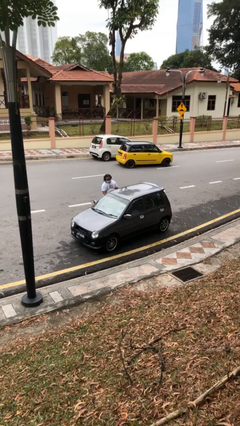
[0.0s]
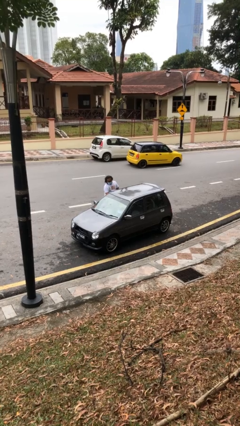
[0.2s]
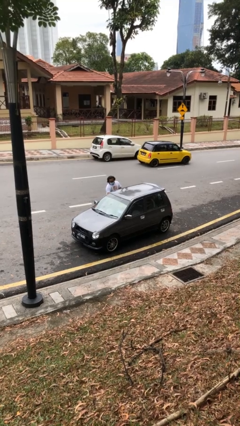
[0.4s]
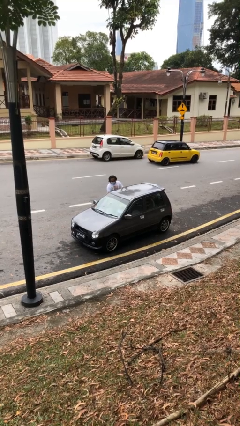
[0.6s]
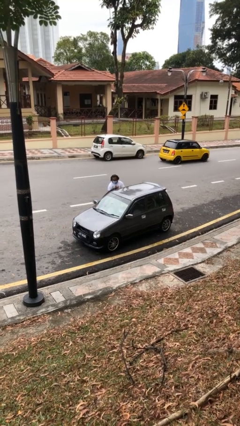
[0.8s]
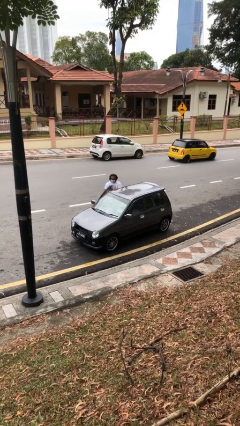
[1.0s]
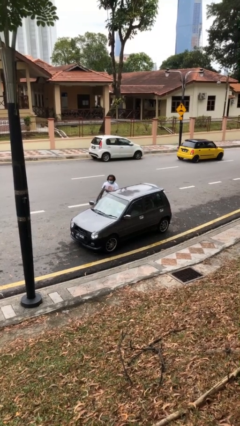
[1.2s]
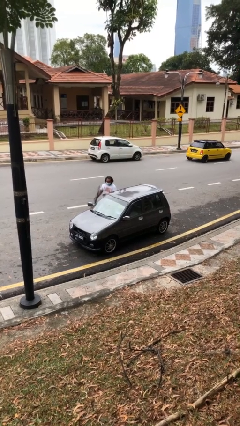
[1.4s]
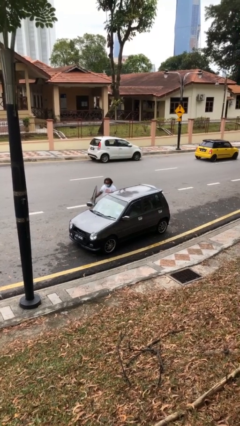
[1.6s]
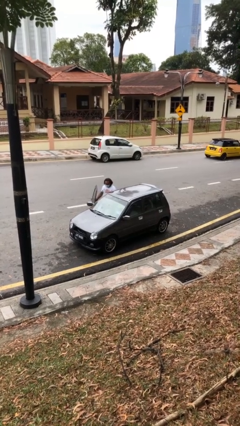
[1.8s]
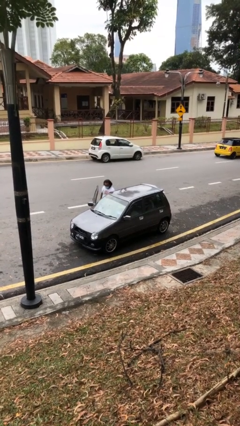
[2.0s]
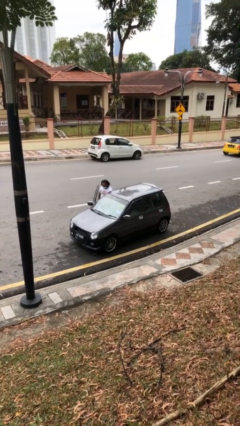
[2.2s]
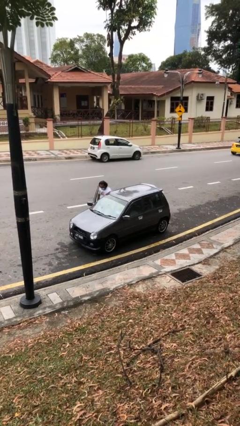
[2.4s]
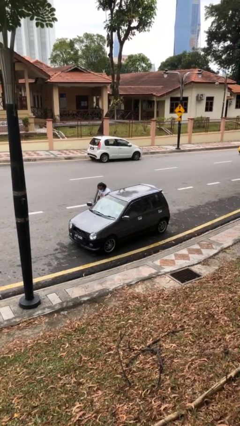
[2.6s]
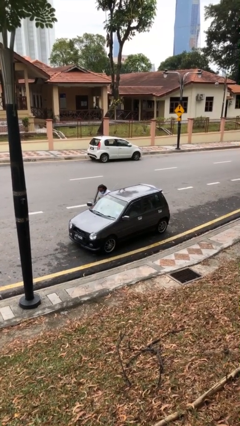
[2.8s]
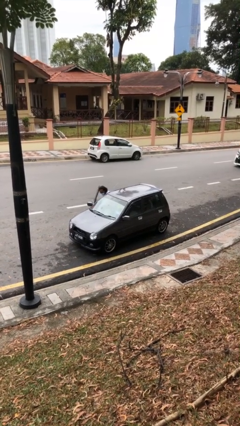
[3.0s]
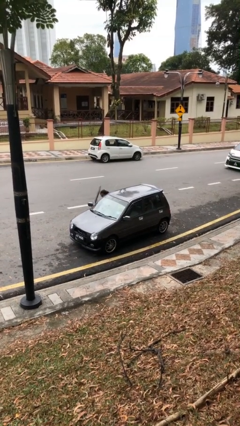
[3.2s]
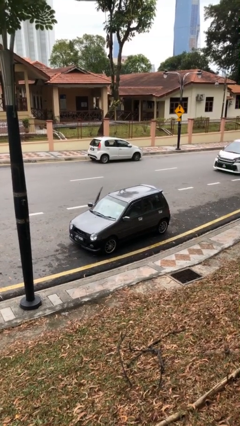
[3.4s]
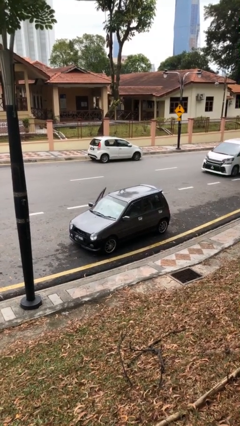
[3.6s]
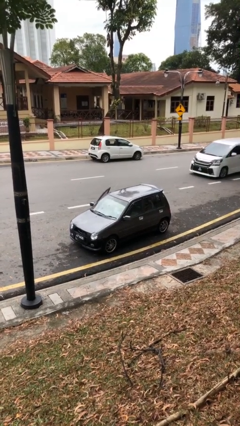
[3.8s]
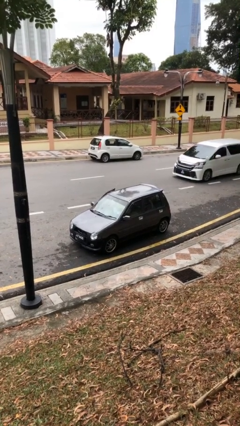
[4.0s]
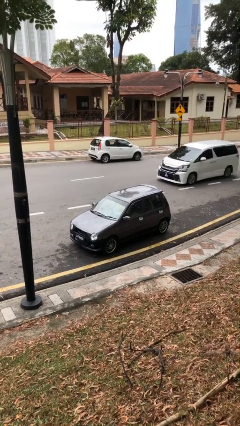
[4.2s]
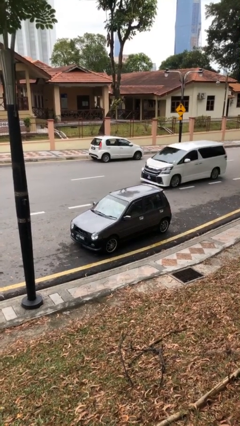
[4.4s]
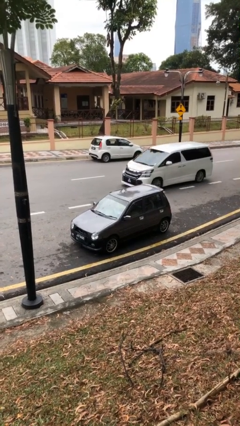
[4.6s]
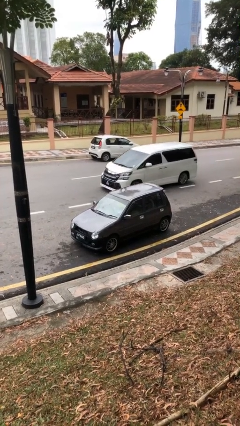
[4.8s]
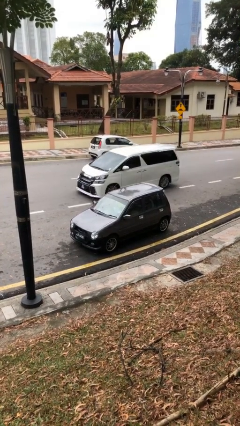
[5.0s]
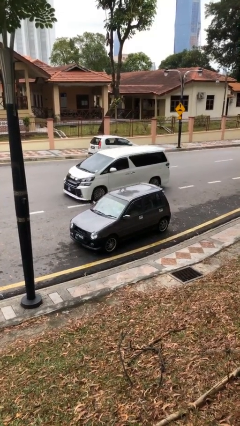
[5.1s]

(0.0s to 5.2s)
car picks up person

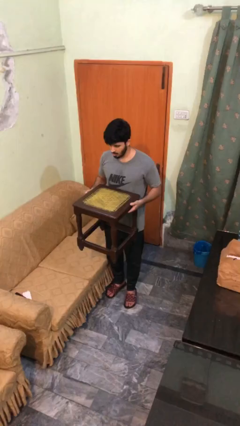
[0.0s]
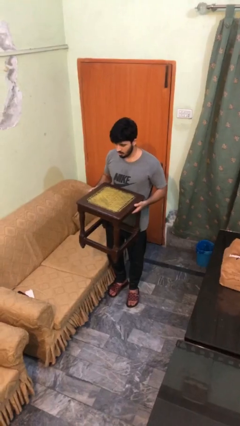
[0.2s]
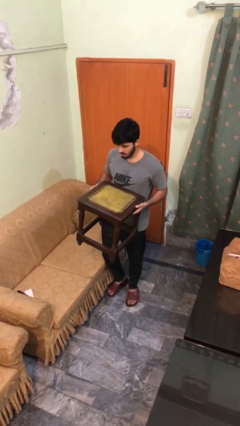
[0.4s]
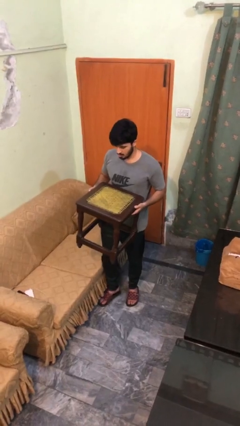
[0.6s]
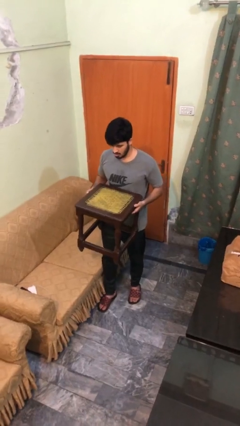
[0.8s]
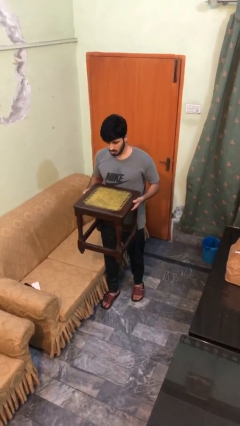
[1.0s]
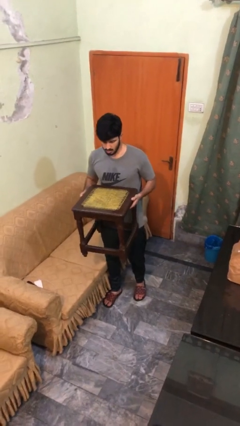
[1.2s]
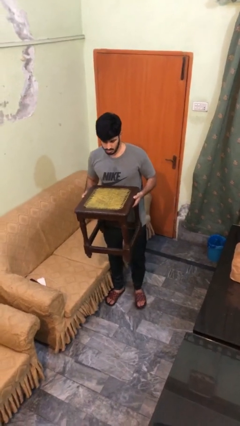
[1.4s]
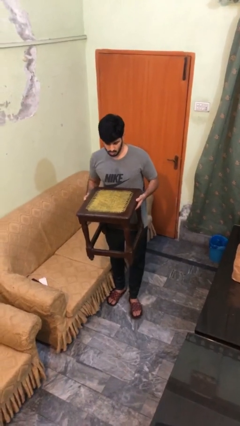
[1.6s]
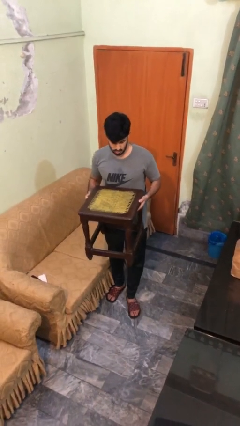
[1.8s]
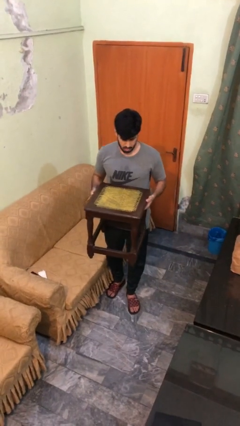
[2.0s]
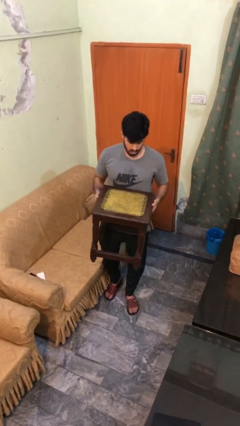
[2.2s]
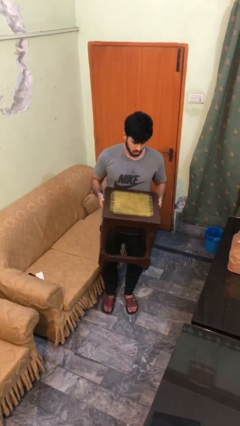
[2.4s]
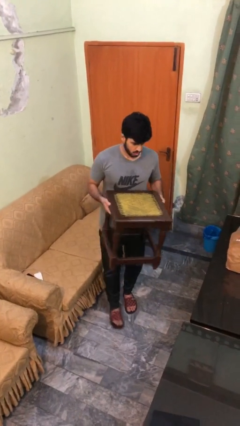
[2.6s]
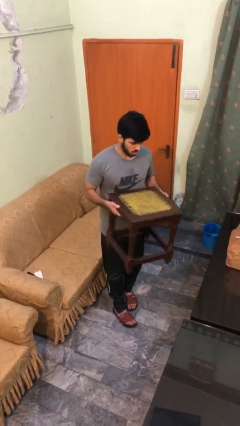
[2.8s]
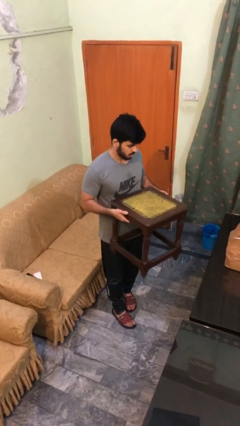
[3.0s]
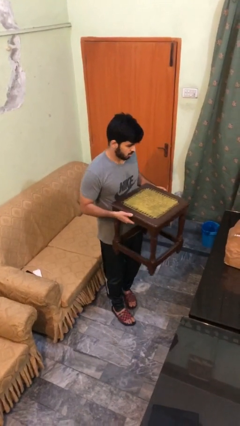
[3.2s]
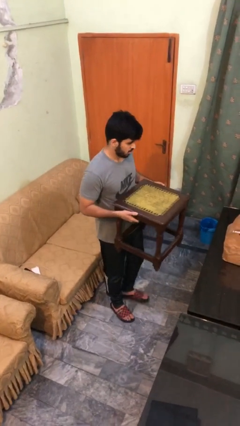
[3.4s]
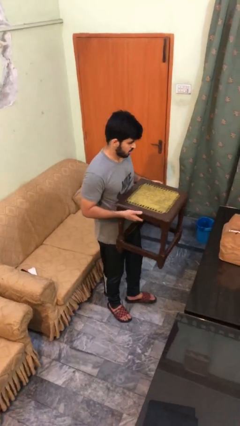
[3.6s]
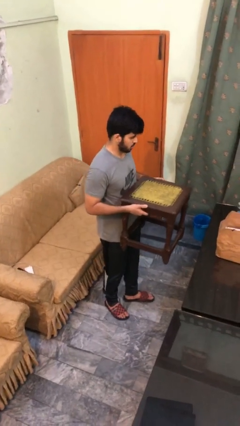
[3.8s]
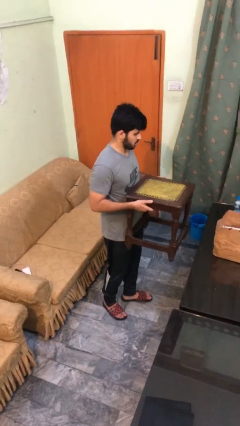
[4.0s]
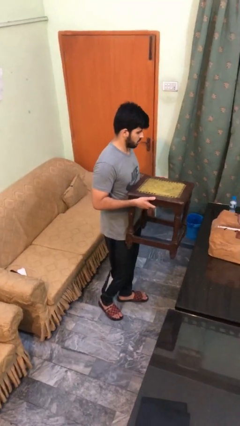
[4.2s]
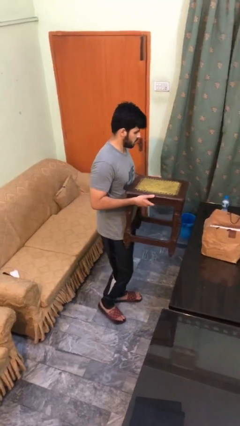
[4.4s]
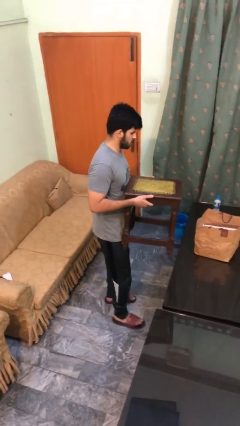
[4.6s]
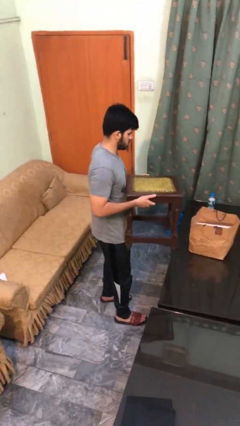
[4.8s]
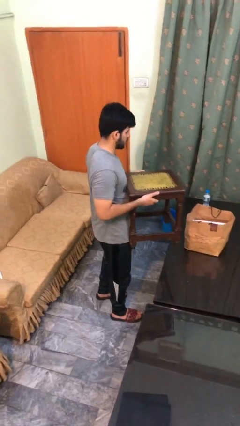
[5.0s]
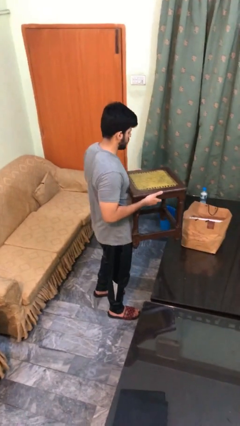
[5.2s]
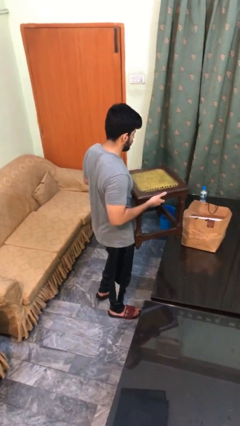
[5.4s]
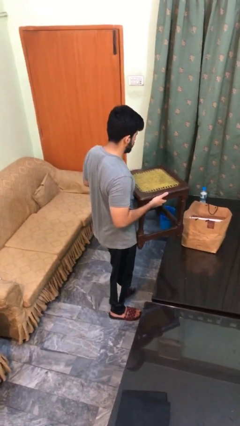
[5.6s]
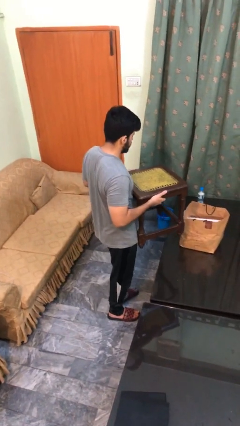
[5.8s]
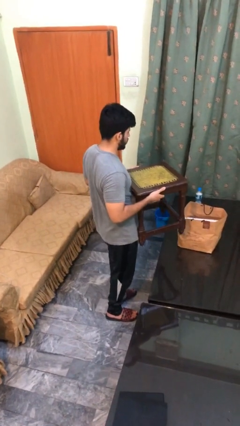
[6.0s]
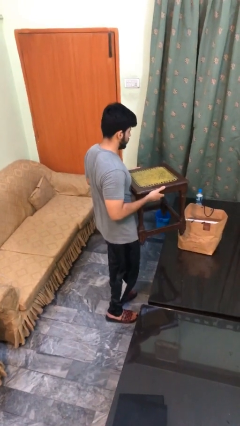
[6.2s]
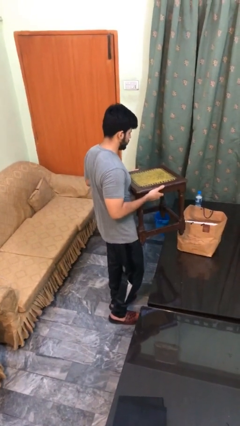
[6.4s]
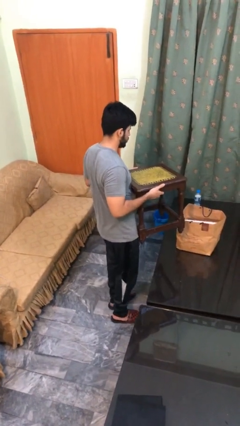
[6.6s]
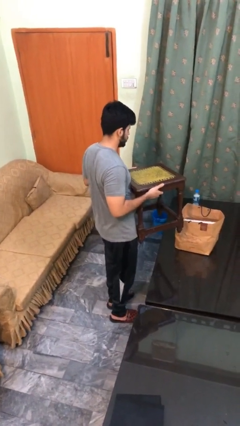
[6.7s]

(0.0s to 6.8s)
person carries furniture

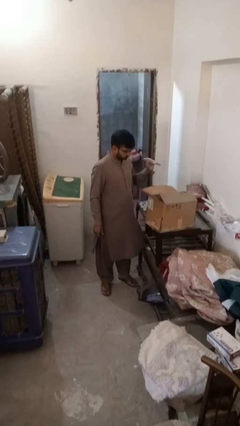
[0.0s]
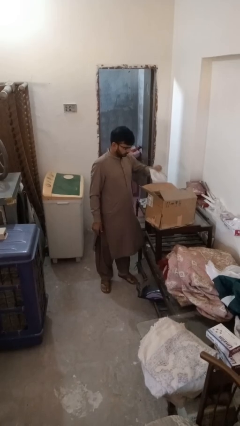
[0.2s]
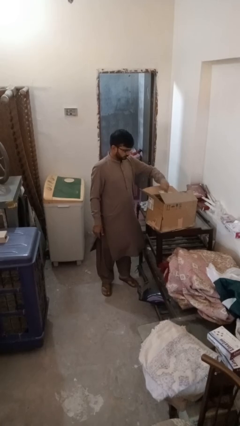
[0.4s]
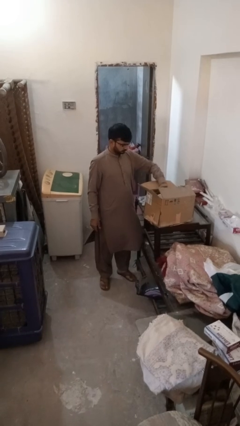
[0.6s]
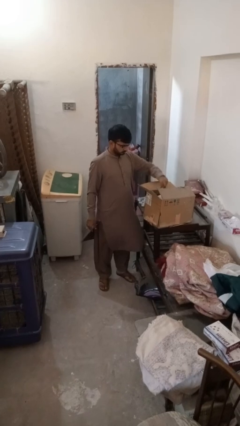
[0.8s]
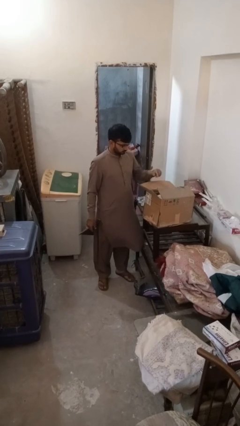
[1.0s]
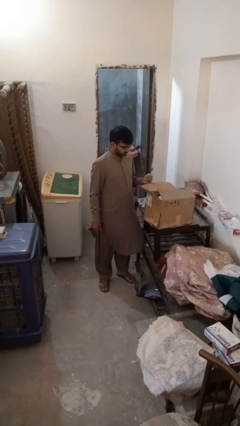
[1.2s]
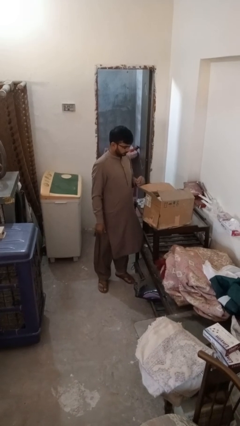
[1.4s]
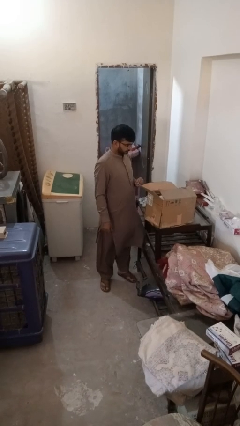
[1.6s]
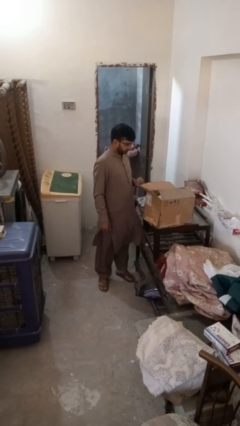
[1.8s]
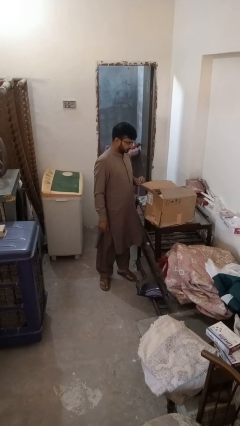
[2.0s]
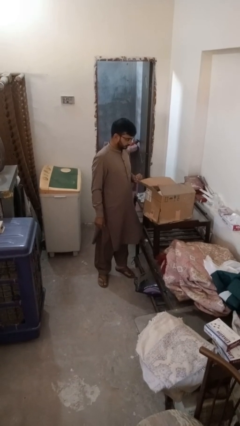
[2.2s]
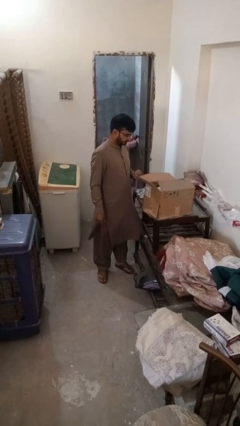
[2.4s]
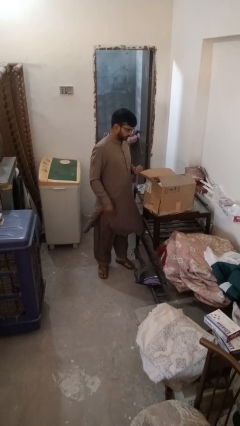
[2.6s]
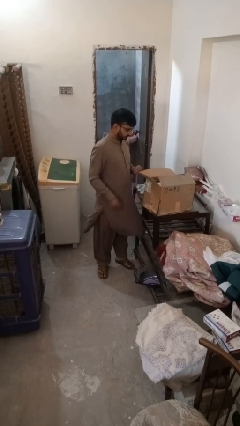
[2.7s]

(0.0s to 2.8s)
person puts object into box

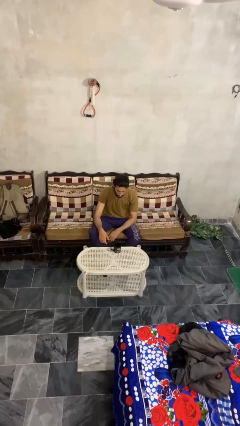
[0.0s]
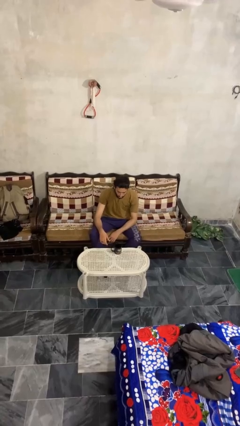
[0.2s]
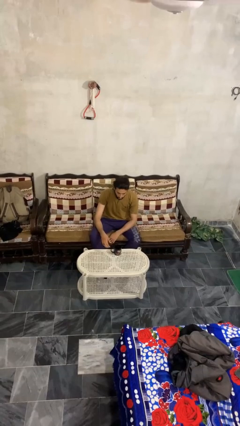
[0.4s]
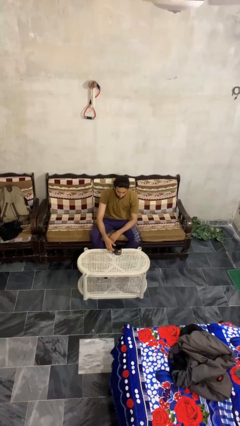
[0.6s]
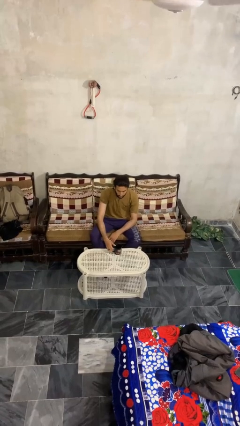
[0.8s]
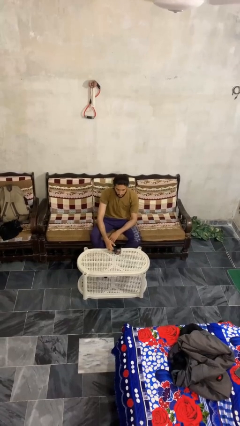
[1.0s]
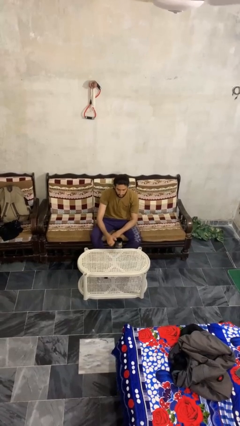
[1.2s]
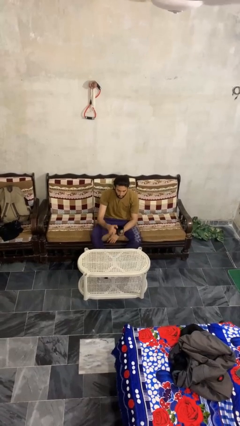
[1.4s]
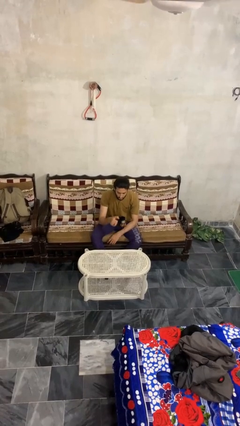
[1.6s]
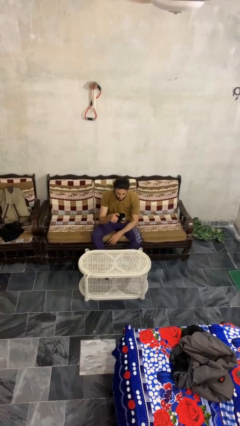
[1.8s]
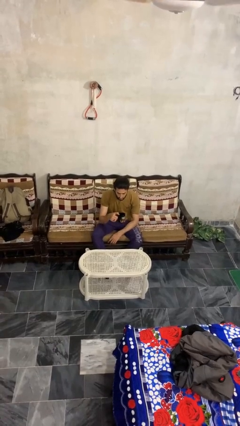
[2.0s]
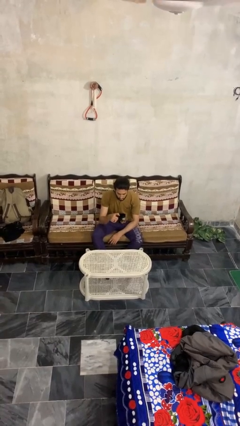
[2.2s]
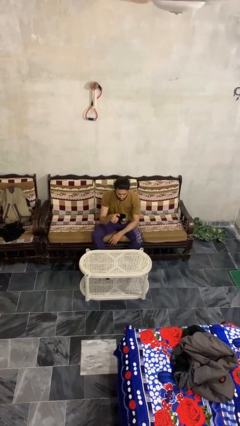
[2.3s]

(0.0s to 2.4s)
person picks up object from table

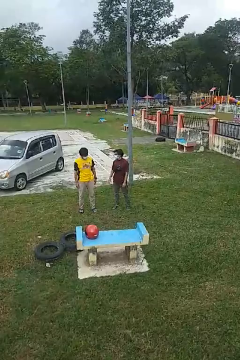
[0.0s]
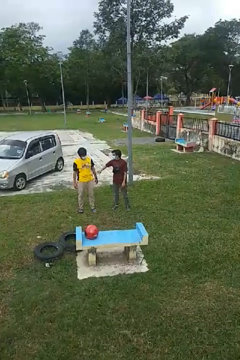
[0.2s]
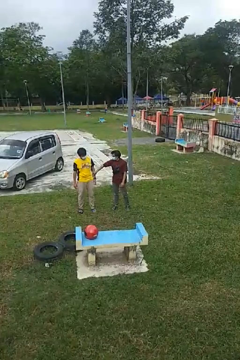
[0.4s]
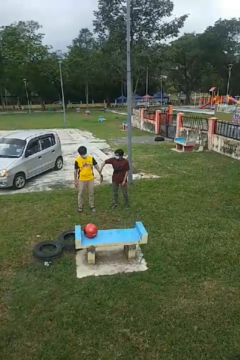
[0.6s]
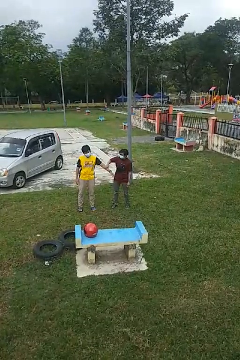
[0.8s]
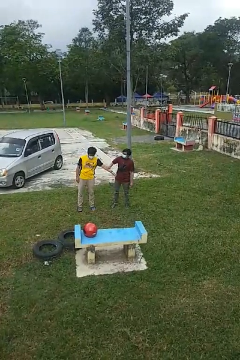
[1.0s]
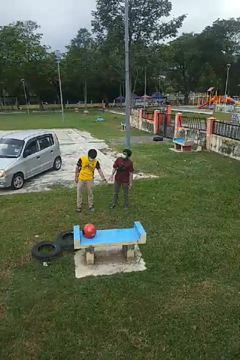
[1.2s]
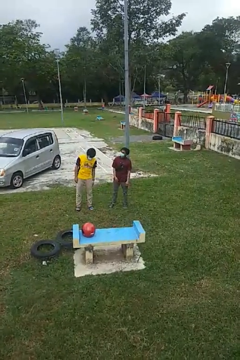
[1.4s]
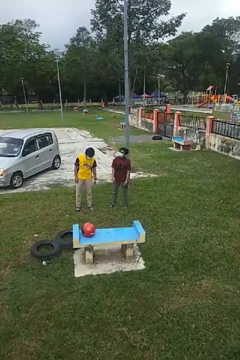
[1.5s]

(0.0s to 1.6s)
person grabs person by forearm
